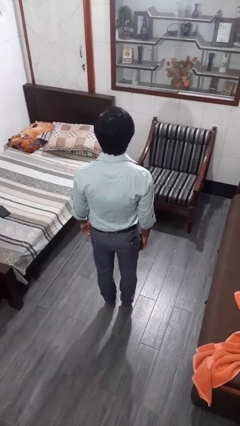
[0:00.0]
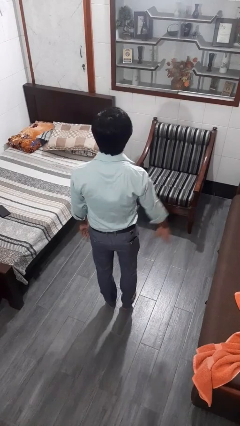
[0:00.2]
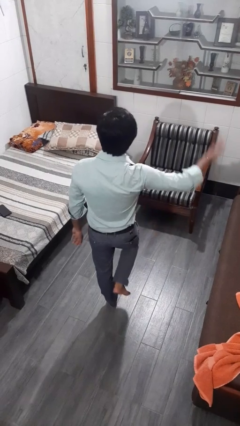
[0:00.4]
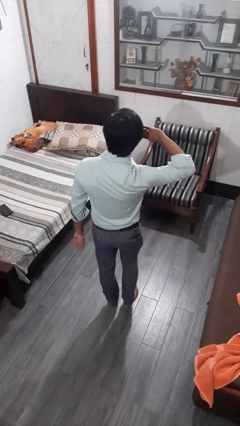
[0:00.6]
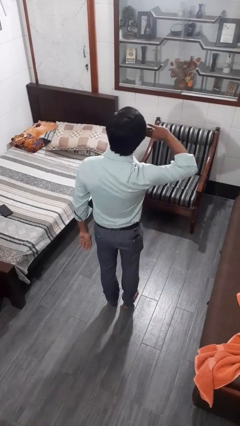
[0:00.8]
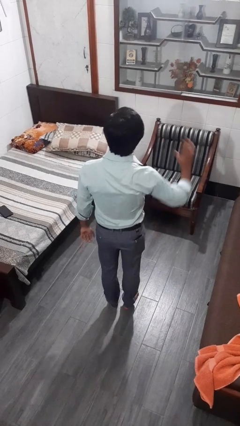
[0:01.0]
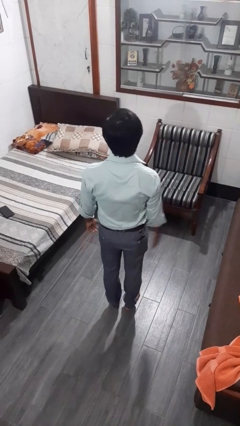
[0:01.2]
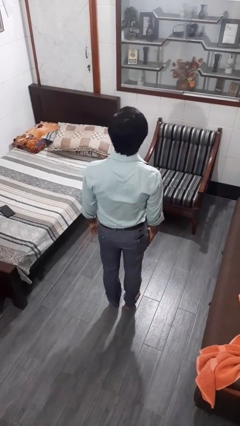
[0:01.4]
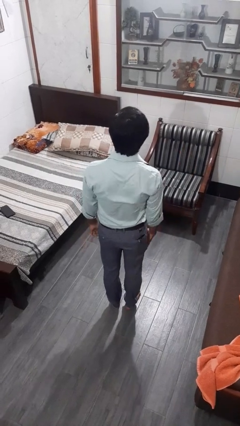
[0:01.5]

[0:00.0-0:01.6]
person salutes

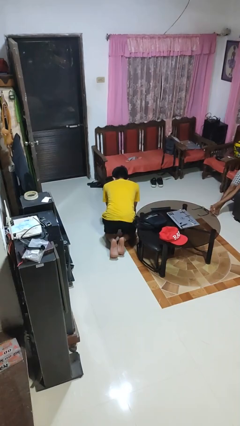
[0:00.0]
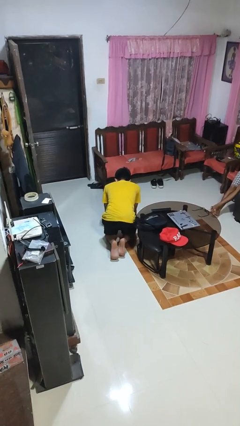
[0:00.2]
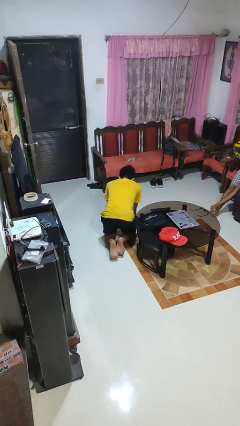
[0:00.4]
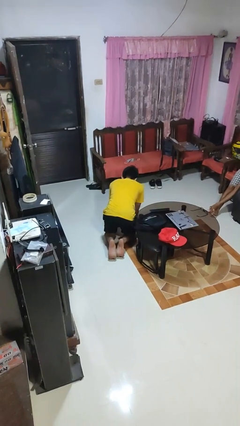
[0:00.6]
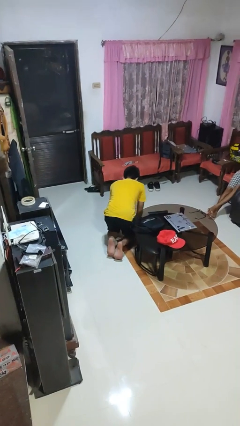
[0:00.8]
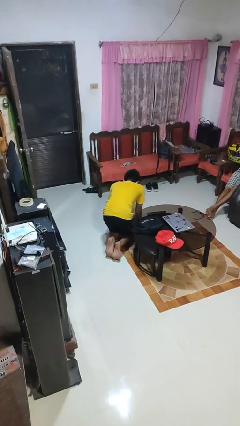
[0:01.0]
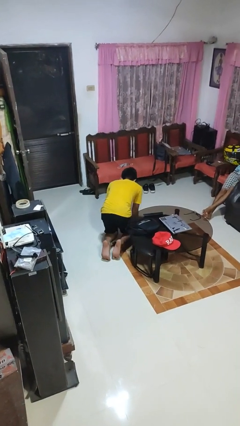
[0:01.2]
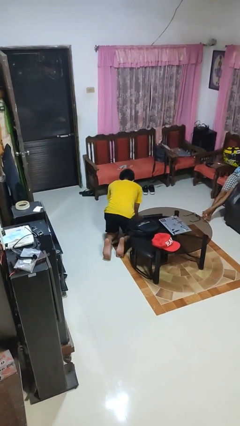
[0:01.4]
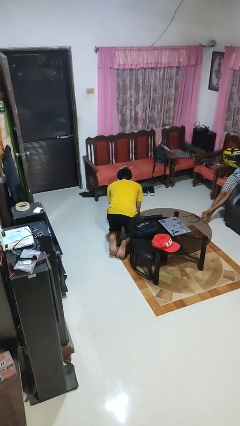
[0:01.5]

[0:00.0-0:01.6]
person crawls

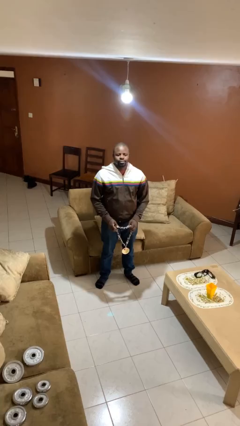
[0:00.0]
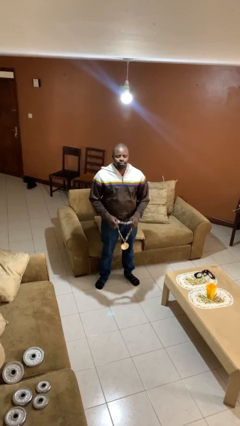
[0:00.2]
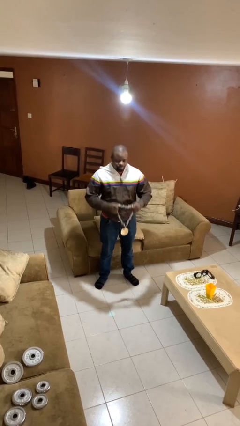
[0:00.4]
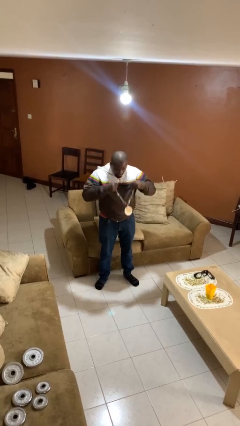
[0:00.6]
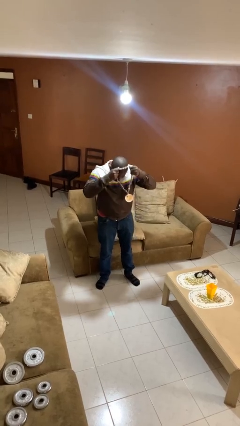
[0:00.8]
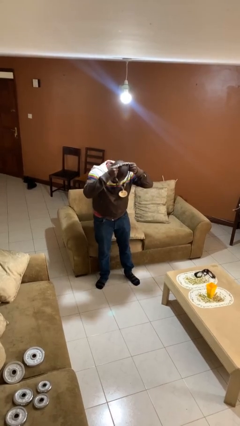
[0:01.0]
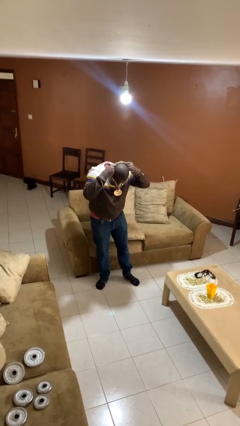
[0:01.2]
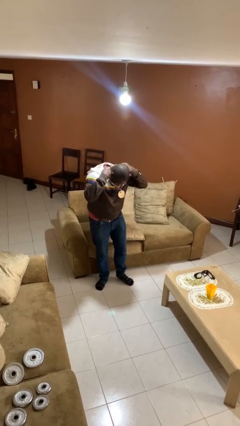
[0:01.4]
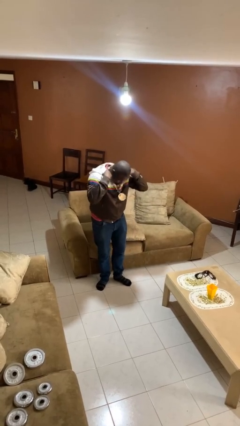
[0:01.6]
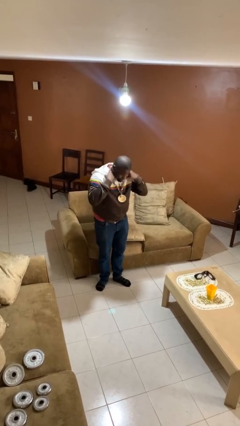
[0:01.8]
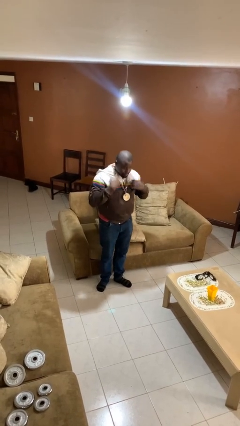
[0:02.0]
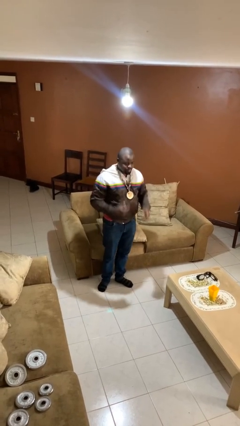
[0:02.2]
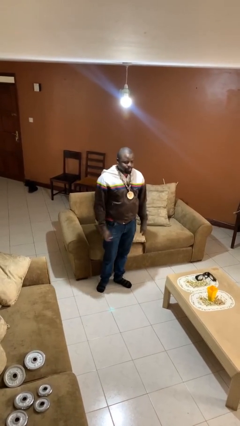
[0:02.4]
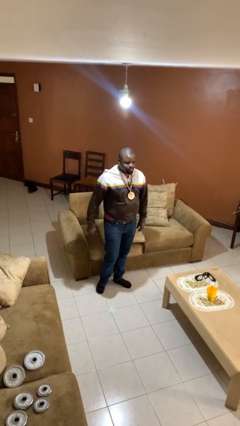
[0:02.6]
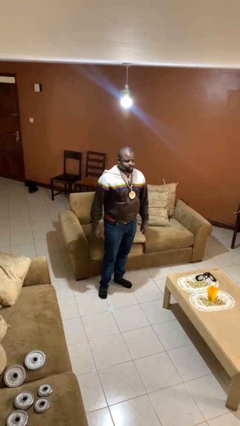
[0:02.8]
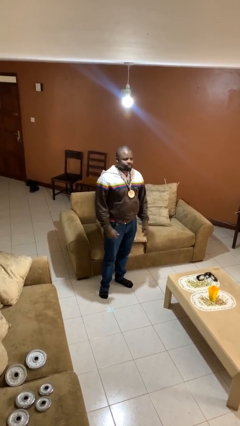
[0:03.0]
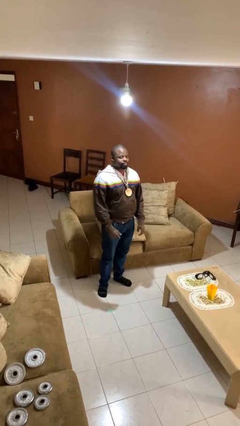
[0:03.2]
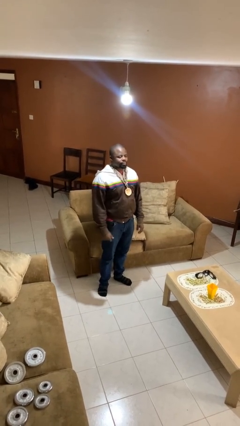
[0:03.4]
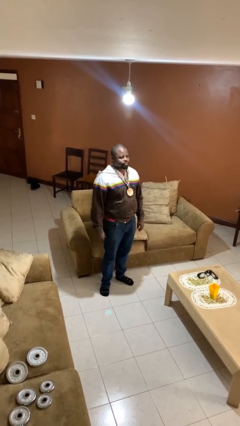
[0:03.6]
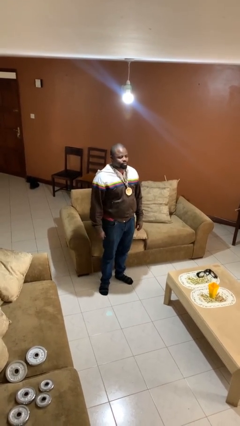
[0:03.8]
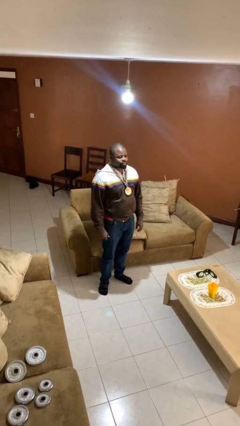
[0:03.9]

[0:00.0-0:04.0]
person puts on necklace

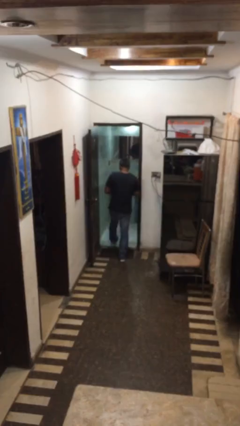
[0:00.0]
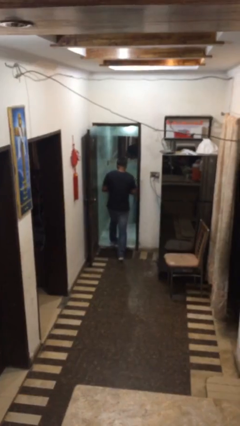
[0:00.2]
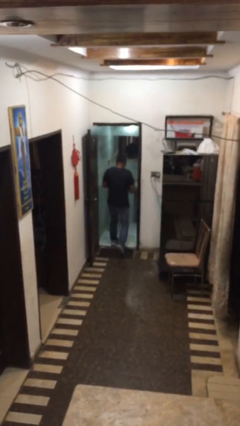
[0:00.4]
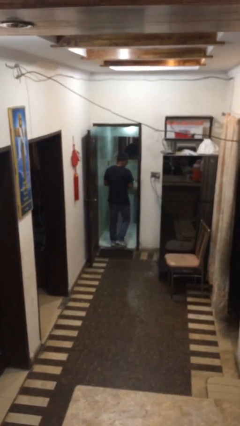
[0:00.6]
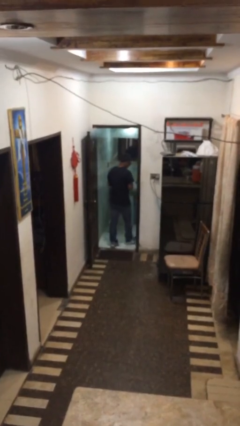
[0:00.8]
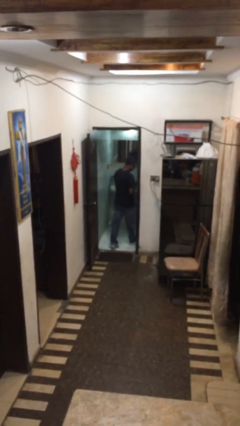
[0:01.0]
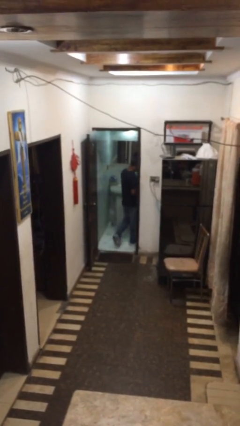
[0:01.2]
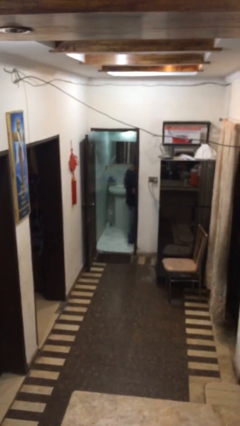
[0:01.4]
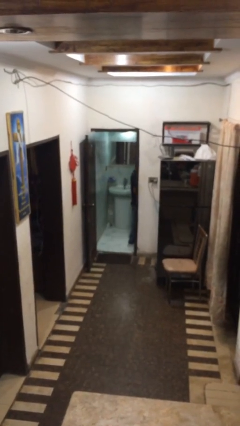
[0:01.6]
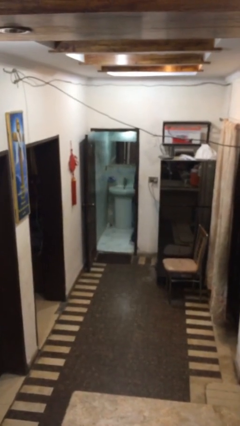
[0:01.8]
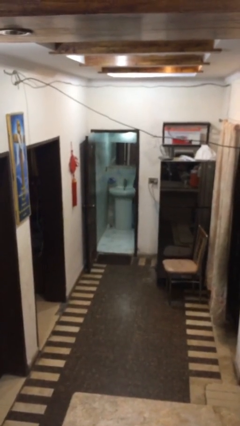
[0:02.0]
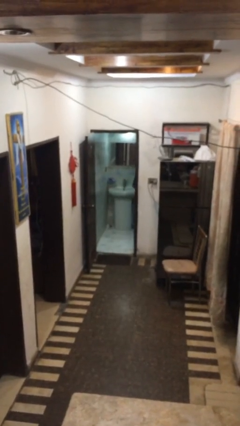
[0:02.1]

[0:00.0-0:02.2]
person exits scene through structure

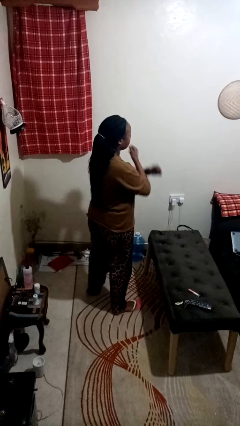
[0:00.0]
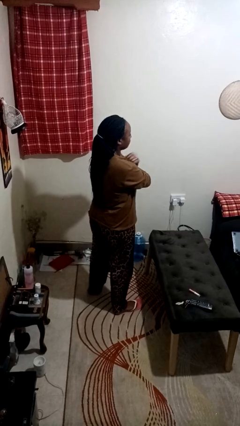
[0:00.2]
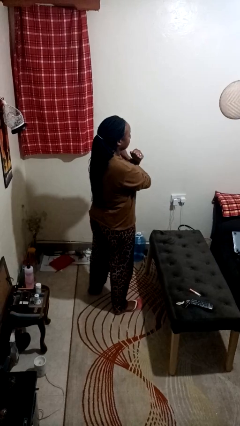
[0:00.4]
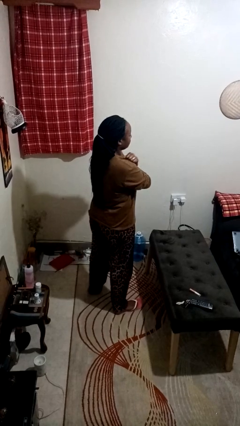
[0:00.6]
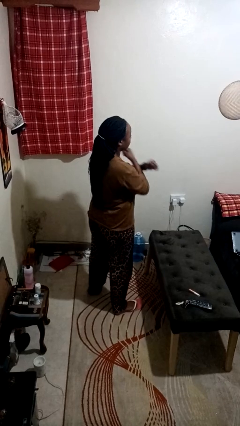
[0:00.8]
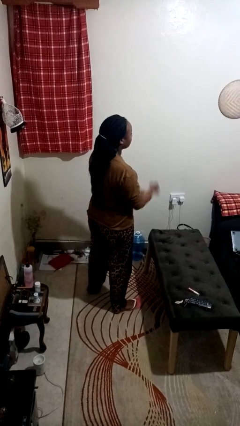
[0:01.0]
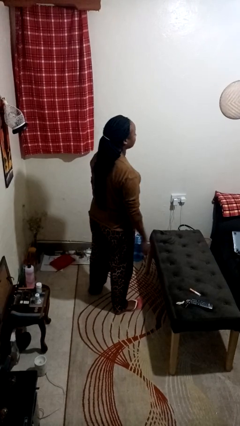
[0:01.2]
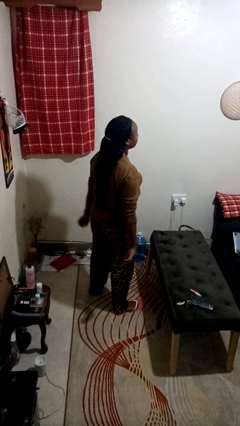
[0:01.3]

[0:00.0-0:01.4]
person gestures arms x

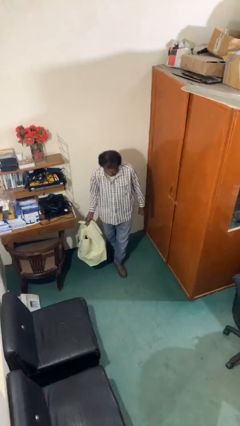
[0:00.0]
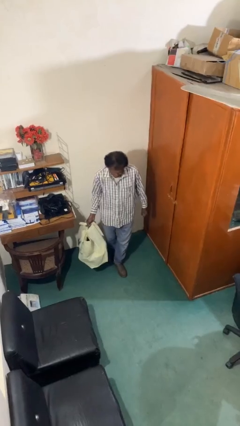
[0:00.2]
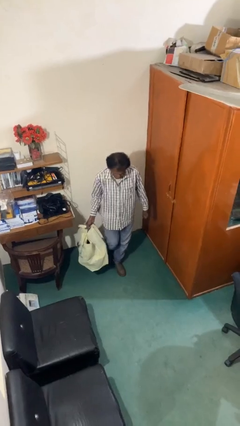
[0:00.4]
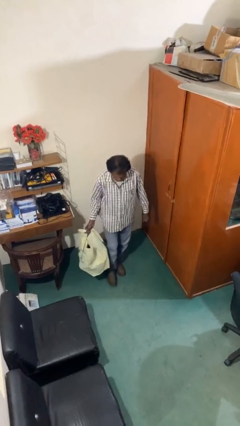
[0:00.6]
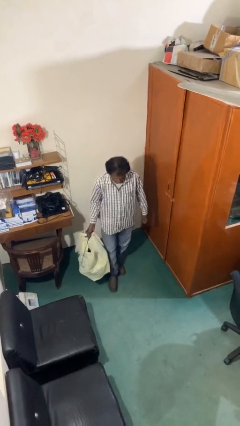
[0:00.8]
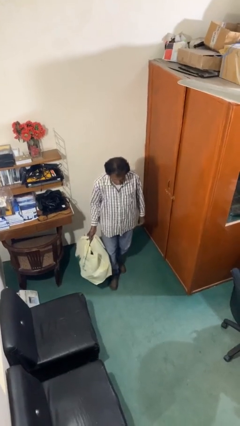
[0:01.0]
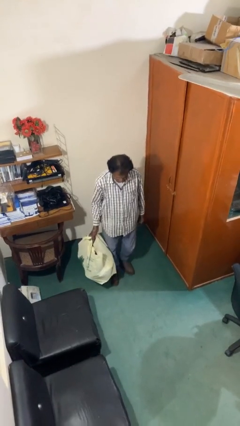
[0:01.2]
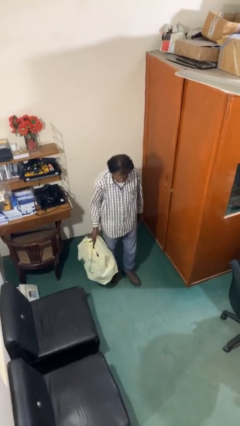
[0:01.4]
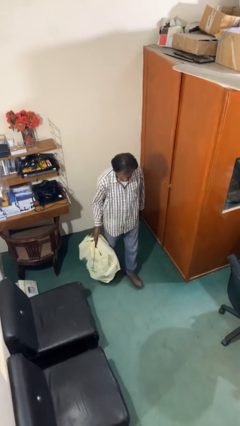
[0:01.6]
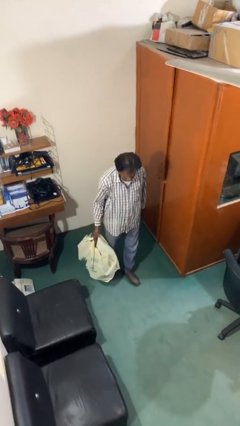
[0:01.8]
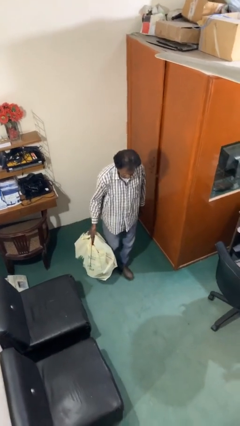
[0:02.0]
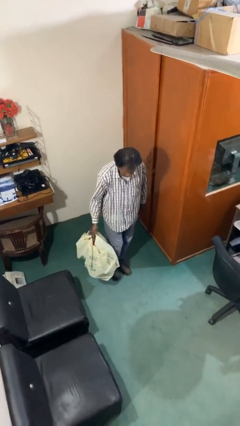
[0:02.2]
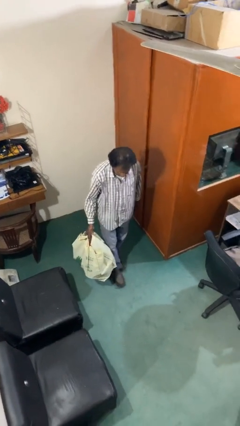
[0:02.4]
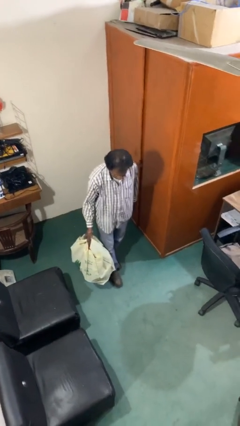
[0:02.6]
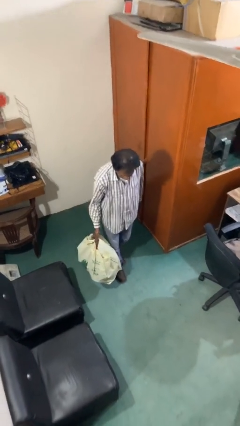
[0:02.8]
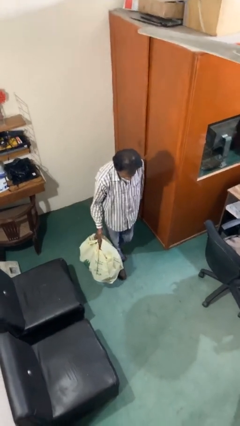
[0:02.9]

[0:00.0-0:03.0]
person carries heavy object

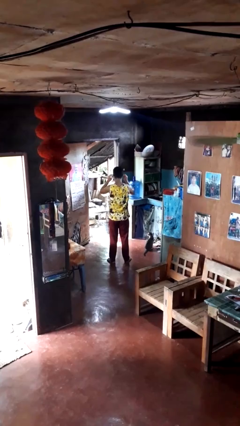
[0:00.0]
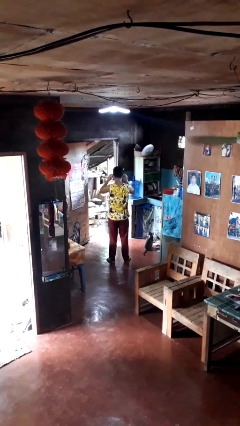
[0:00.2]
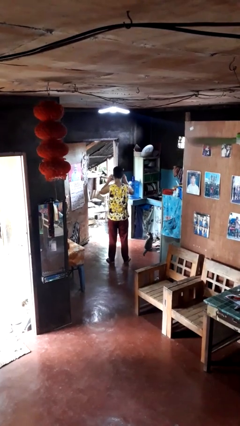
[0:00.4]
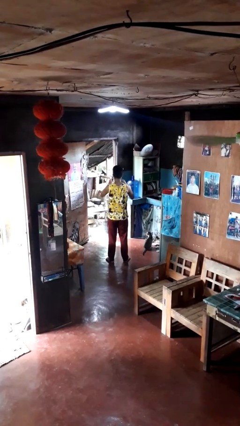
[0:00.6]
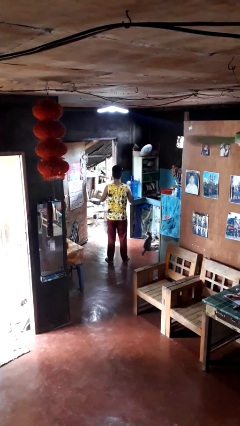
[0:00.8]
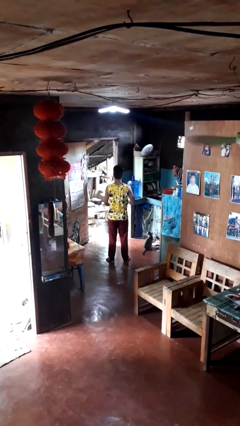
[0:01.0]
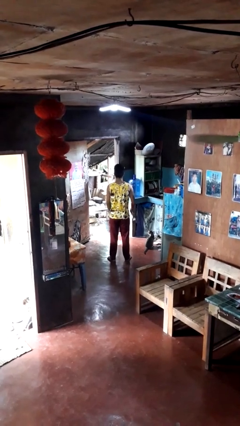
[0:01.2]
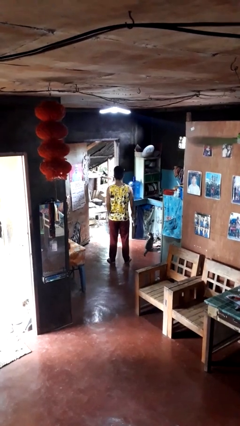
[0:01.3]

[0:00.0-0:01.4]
person takes off glasses

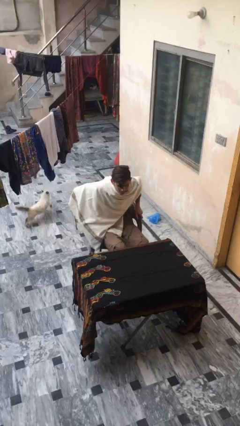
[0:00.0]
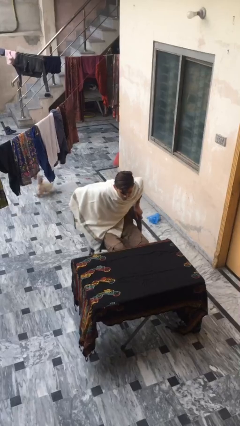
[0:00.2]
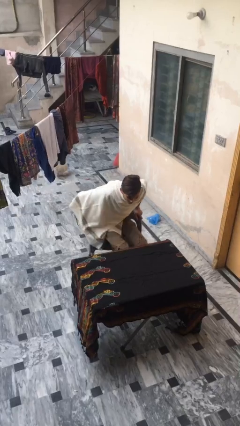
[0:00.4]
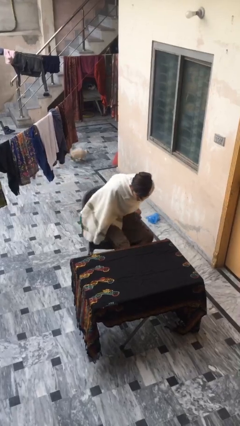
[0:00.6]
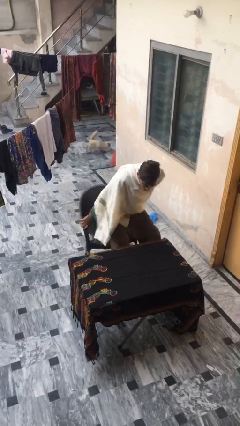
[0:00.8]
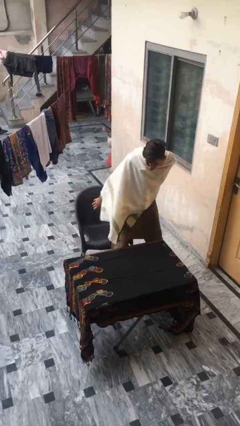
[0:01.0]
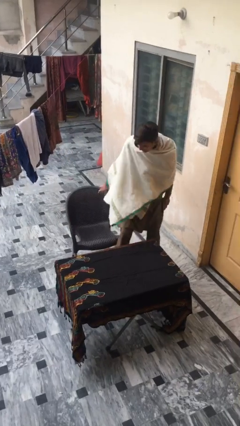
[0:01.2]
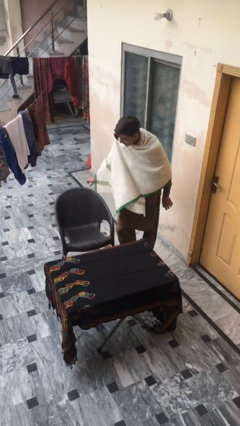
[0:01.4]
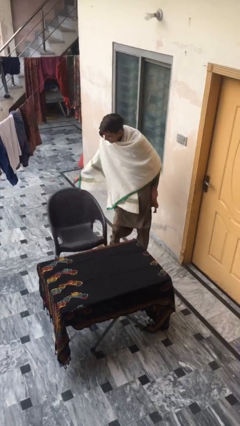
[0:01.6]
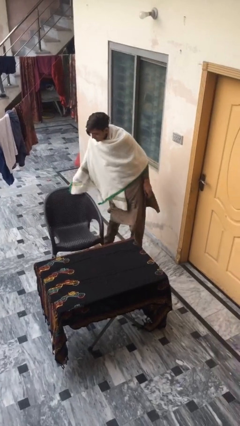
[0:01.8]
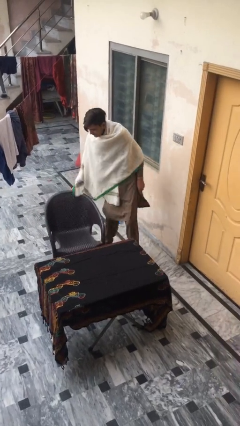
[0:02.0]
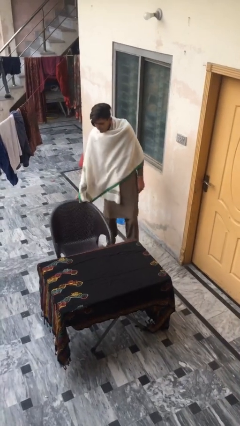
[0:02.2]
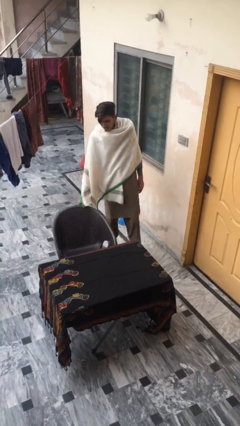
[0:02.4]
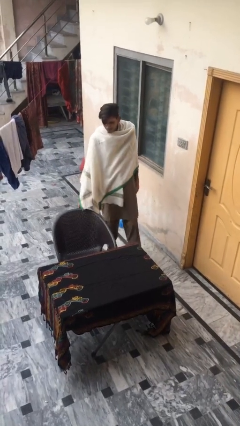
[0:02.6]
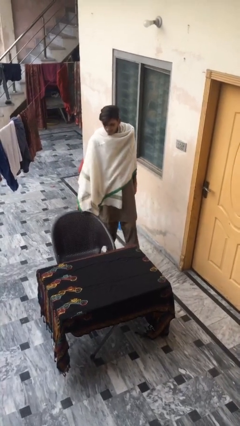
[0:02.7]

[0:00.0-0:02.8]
person stands up
